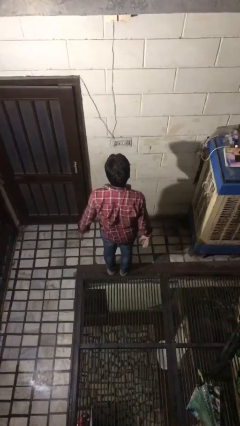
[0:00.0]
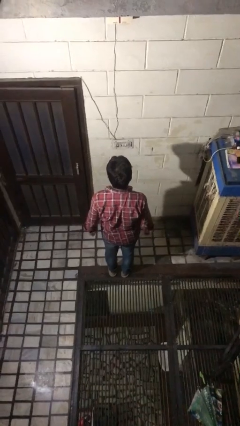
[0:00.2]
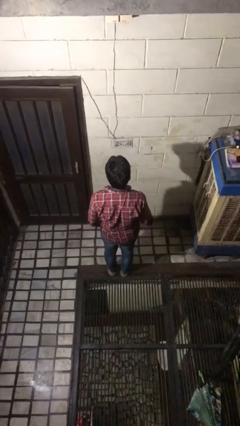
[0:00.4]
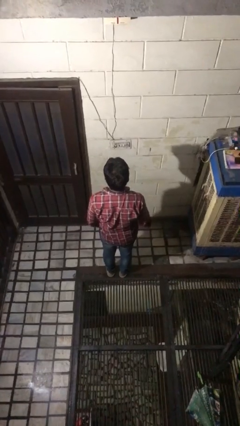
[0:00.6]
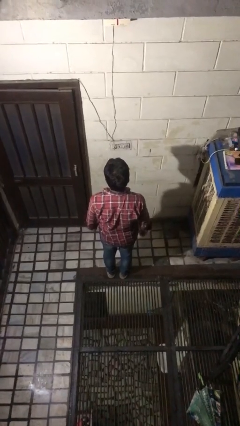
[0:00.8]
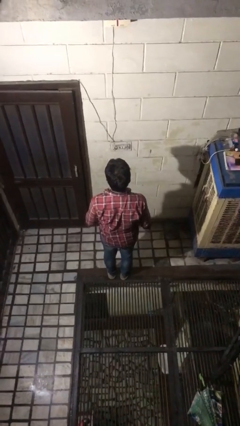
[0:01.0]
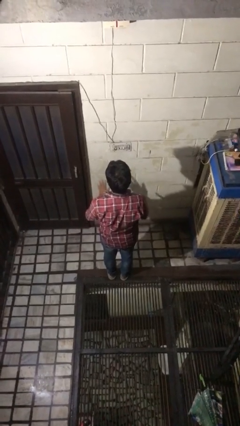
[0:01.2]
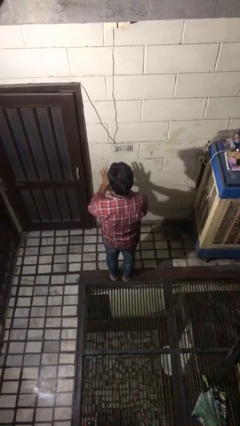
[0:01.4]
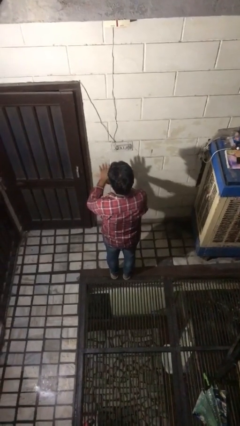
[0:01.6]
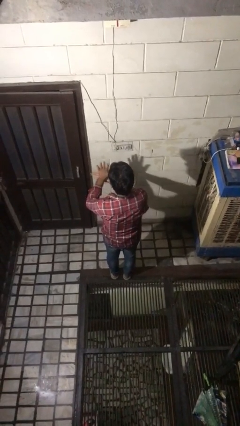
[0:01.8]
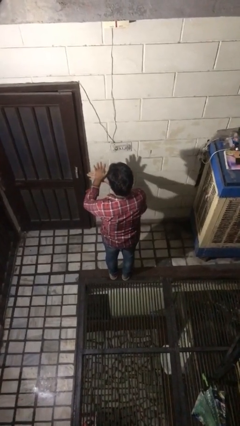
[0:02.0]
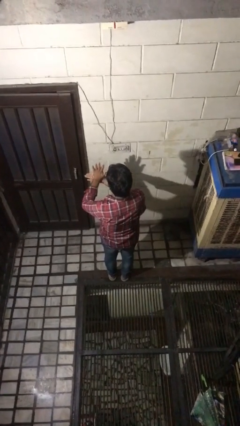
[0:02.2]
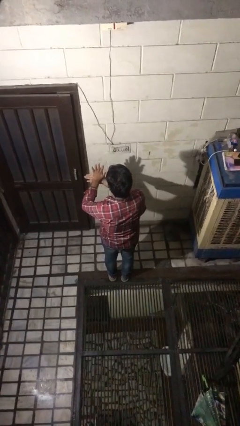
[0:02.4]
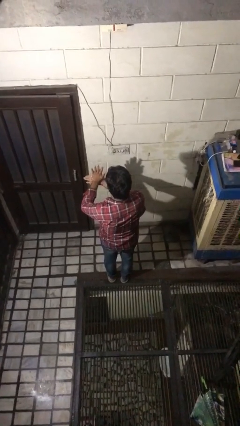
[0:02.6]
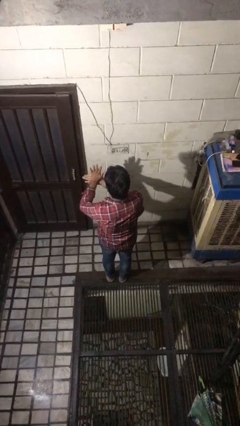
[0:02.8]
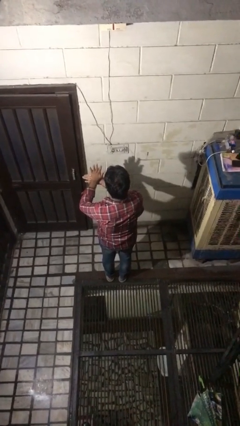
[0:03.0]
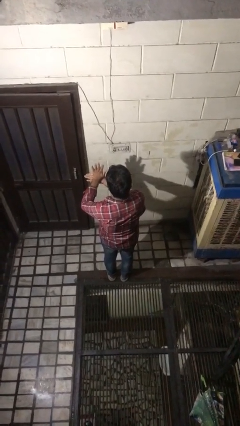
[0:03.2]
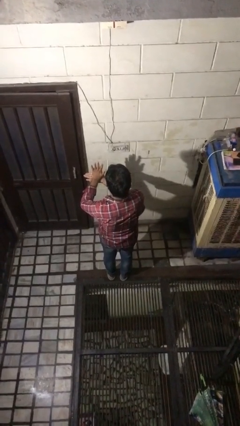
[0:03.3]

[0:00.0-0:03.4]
person gestures number five

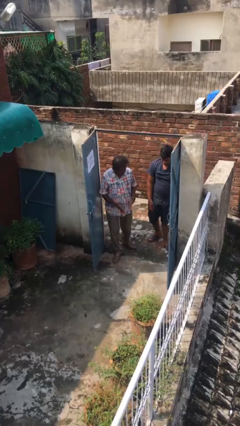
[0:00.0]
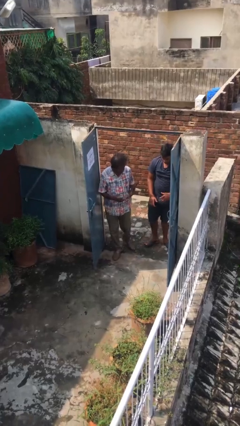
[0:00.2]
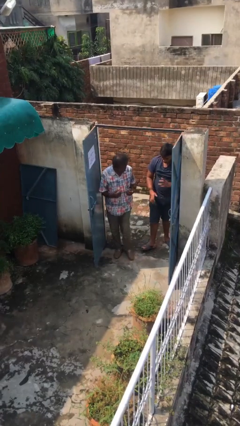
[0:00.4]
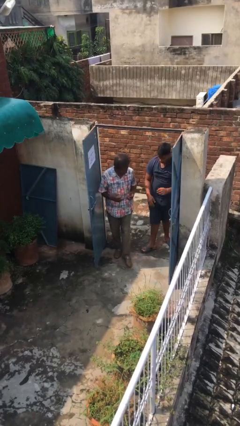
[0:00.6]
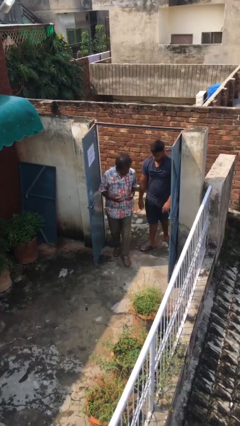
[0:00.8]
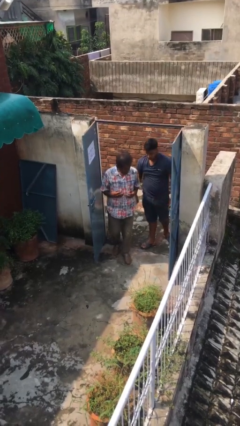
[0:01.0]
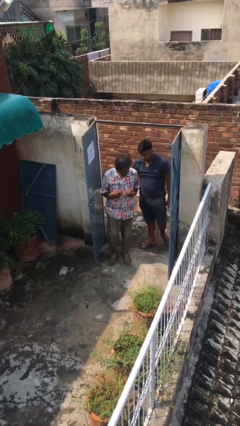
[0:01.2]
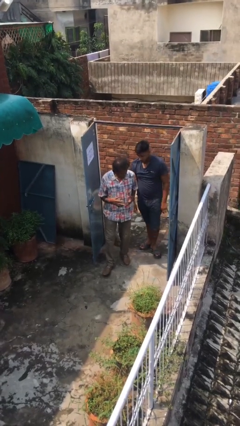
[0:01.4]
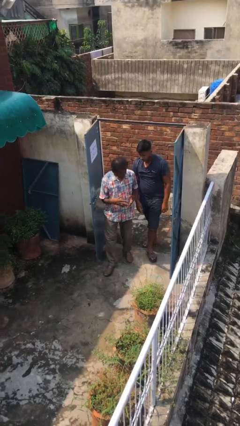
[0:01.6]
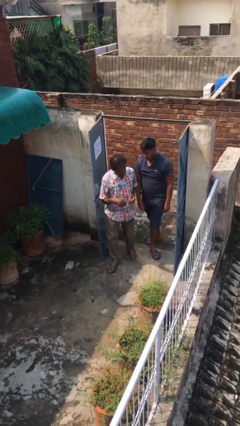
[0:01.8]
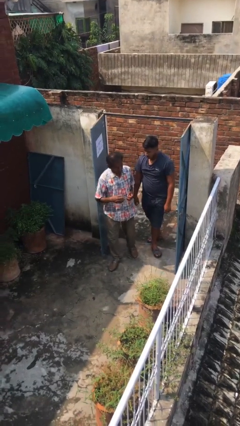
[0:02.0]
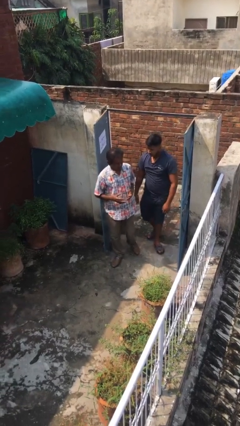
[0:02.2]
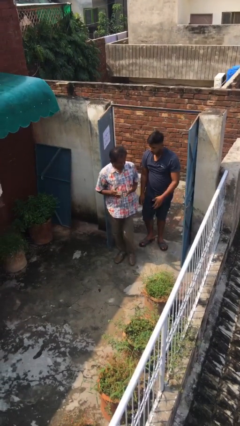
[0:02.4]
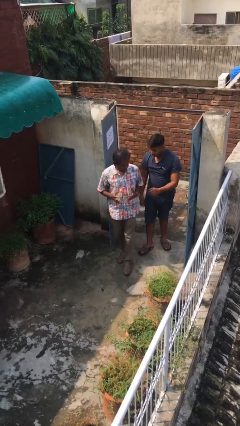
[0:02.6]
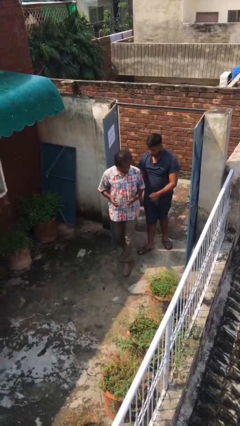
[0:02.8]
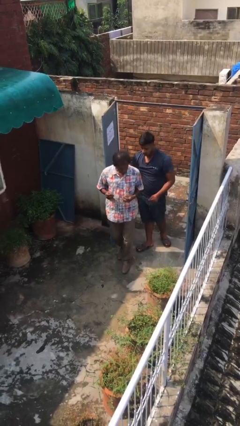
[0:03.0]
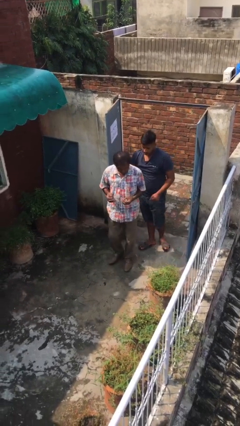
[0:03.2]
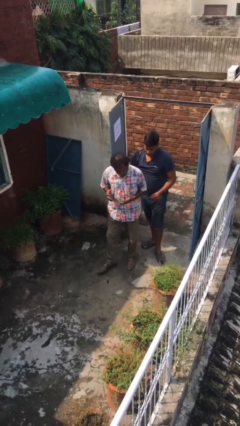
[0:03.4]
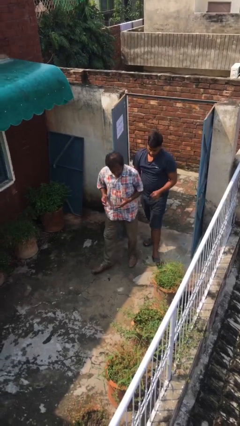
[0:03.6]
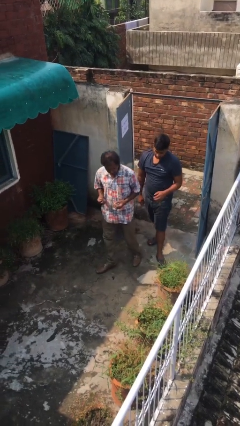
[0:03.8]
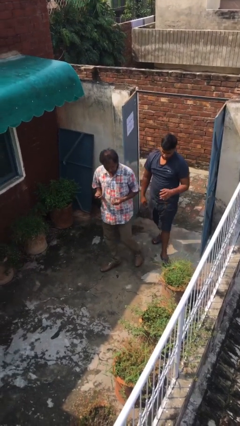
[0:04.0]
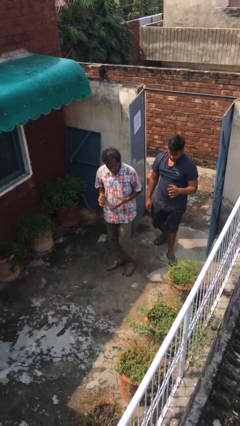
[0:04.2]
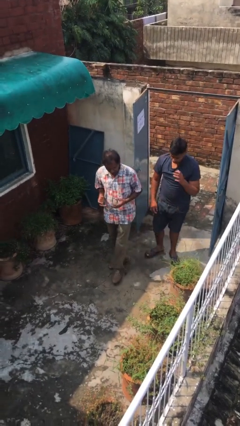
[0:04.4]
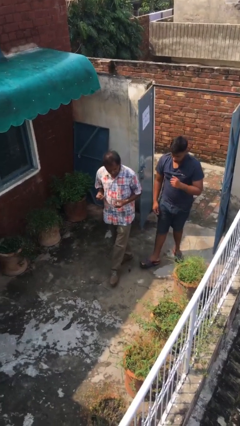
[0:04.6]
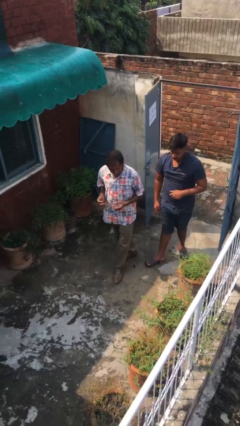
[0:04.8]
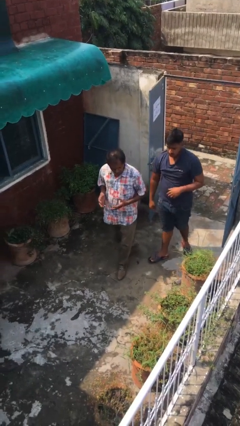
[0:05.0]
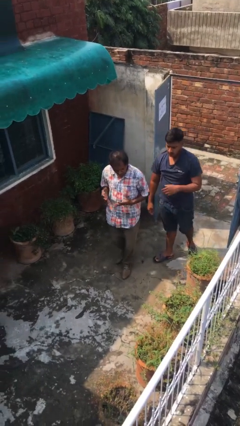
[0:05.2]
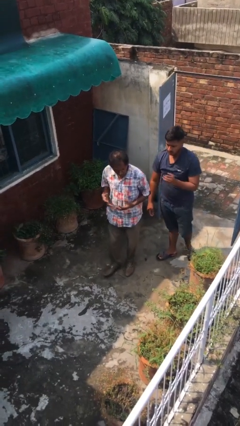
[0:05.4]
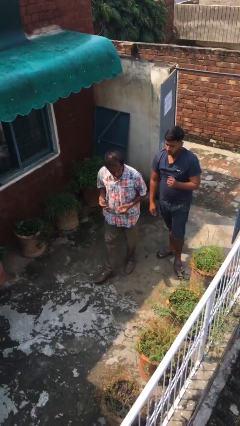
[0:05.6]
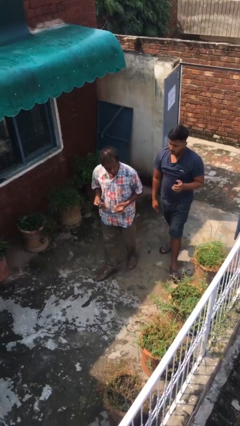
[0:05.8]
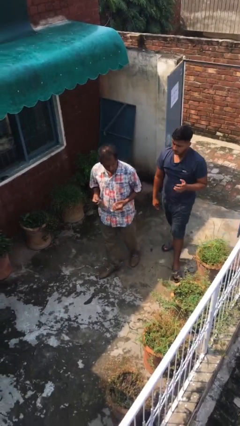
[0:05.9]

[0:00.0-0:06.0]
person talks to person

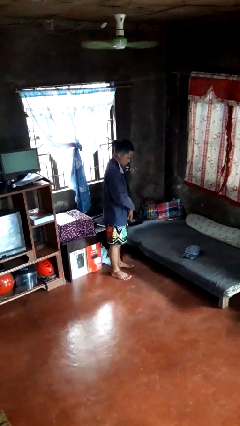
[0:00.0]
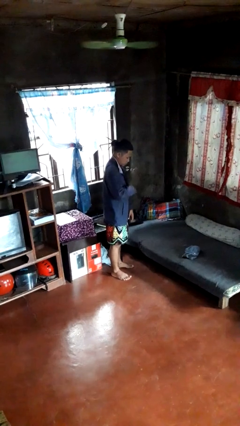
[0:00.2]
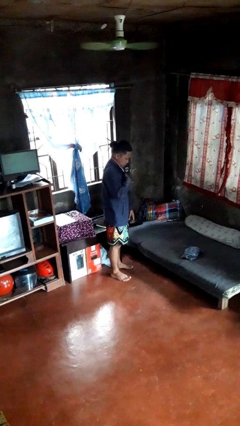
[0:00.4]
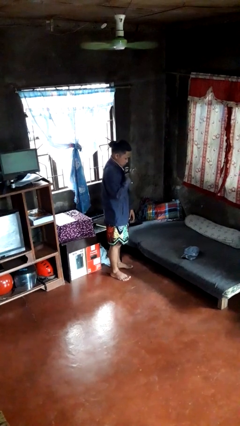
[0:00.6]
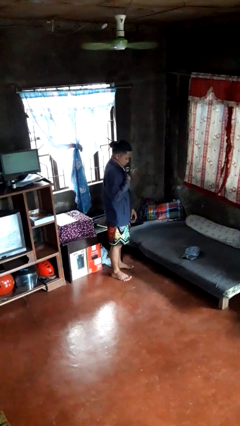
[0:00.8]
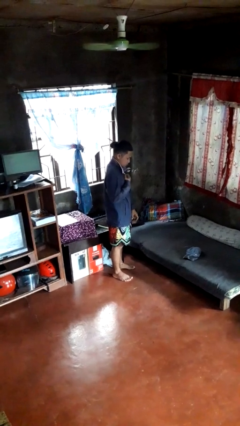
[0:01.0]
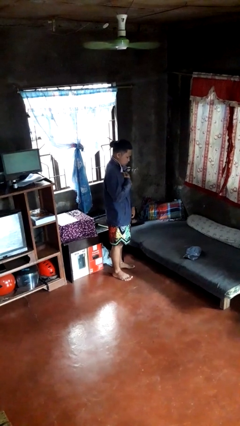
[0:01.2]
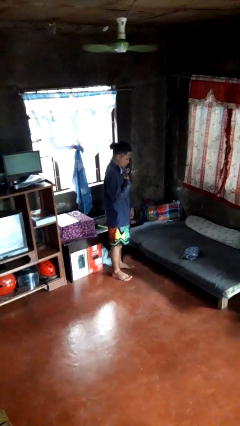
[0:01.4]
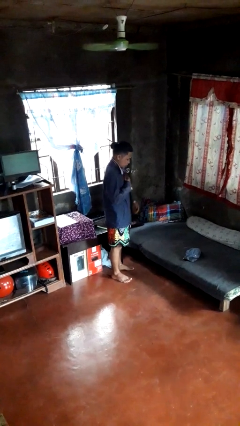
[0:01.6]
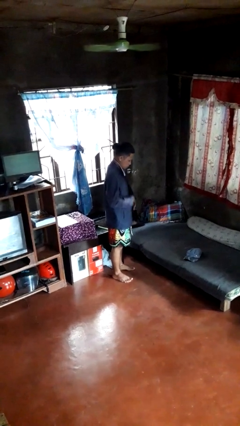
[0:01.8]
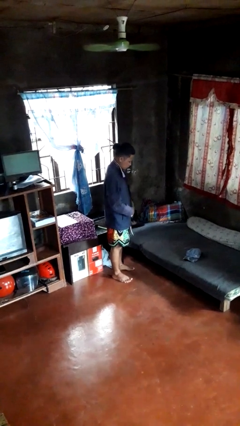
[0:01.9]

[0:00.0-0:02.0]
person zips up jacket

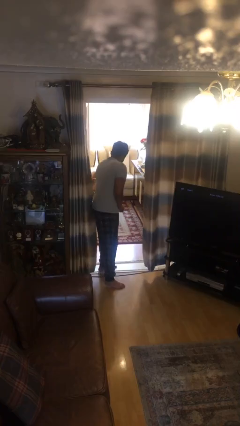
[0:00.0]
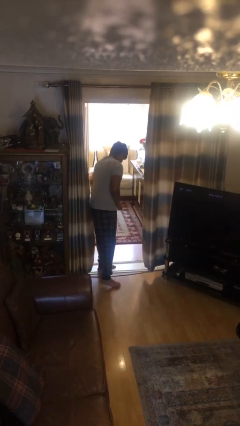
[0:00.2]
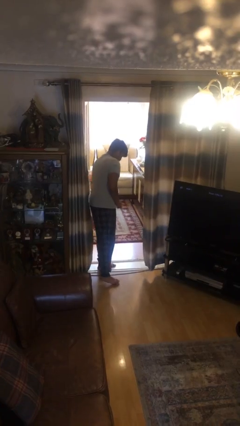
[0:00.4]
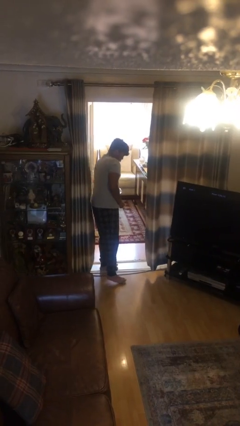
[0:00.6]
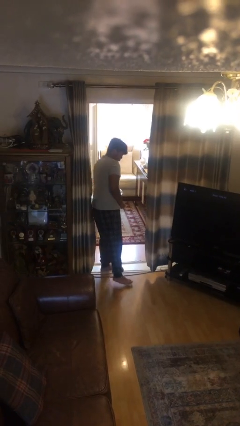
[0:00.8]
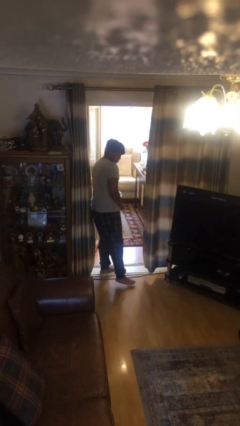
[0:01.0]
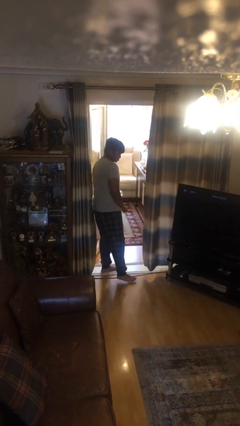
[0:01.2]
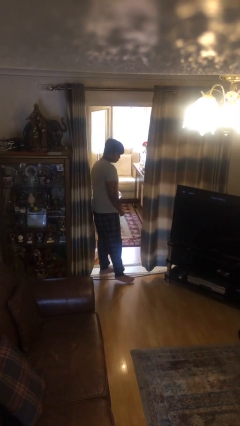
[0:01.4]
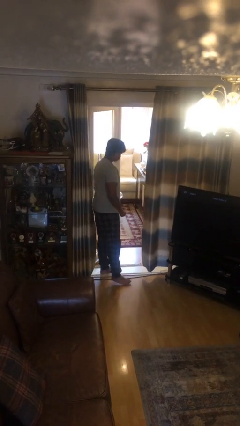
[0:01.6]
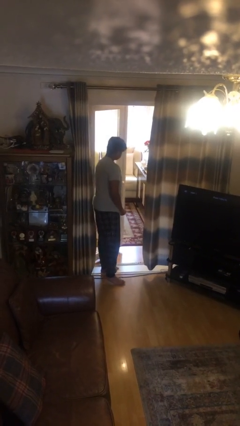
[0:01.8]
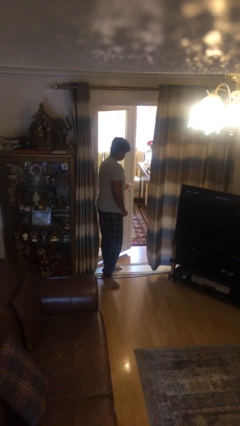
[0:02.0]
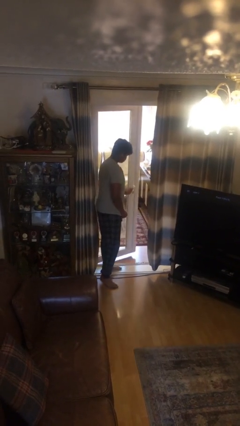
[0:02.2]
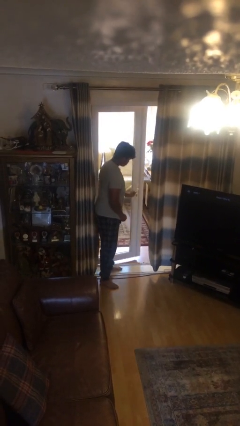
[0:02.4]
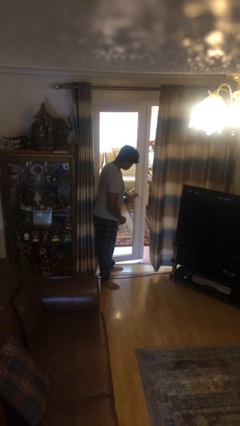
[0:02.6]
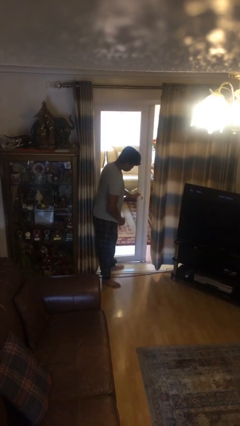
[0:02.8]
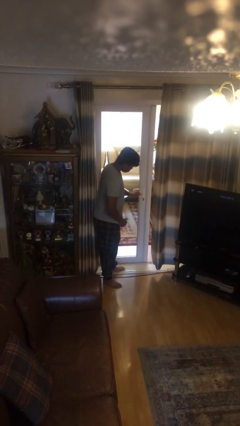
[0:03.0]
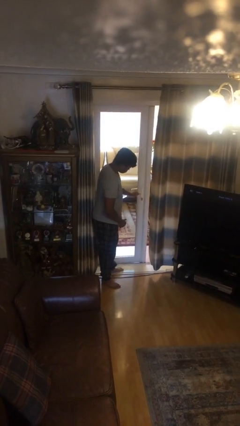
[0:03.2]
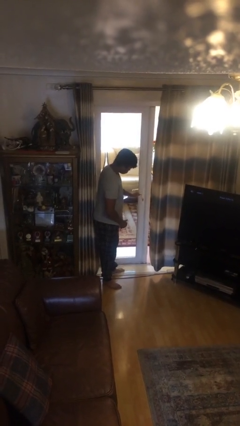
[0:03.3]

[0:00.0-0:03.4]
person closes facility door

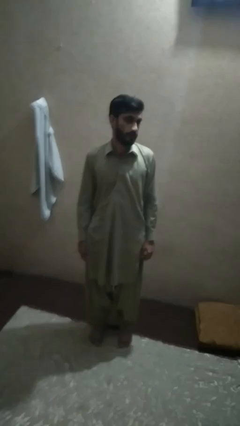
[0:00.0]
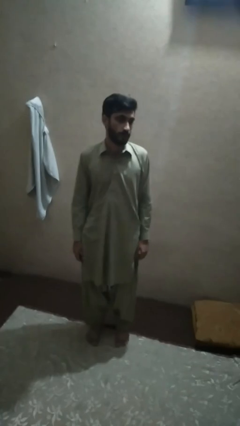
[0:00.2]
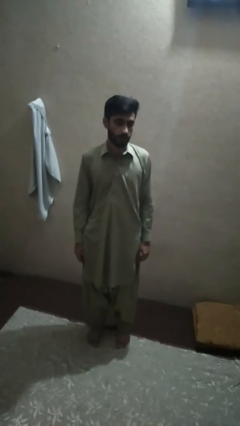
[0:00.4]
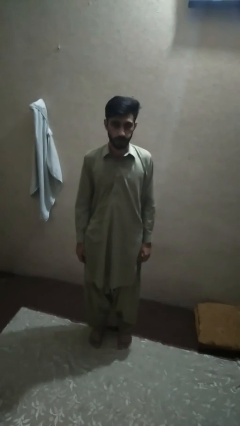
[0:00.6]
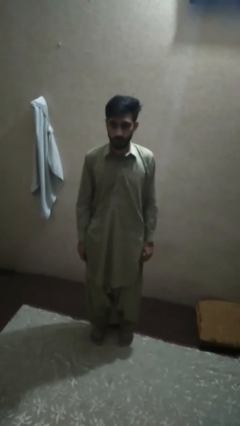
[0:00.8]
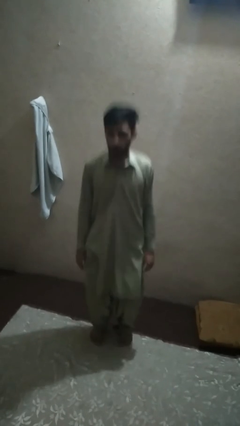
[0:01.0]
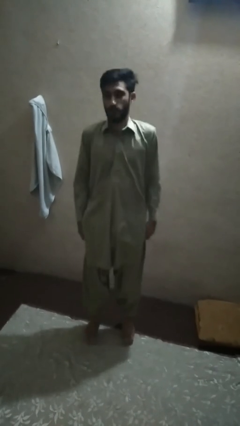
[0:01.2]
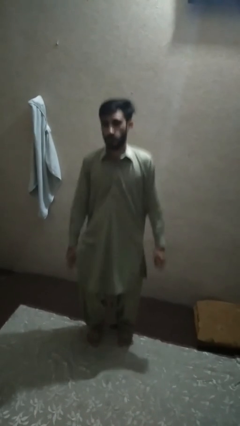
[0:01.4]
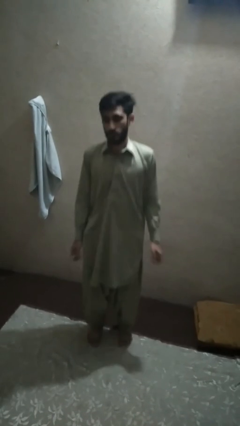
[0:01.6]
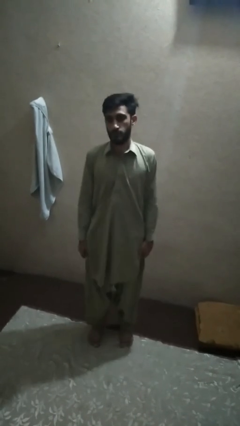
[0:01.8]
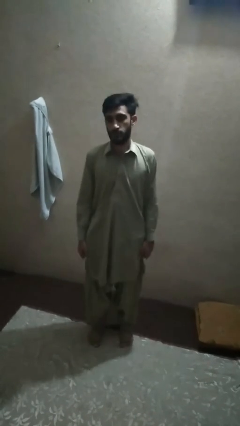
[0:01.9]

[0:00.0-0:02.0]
person jumps

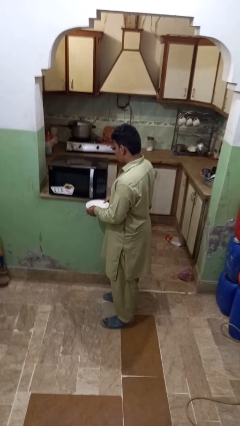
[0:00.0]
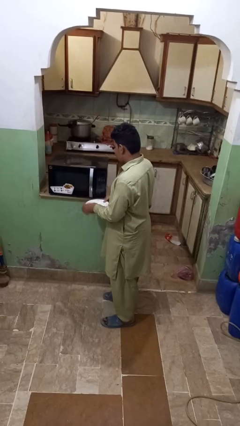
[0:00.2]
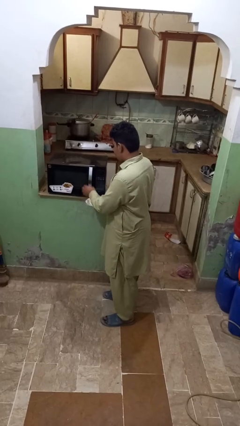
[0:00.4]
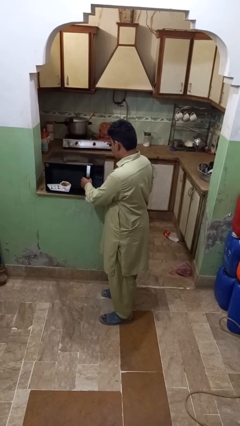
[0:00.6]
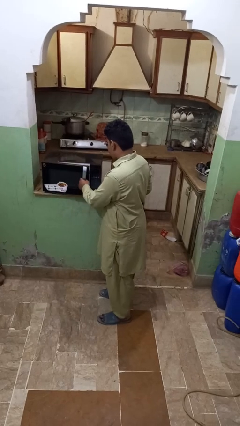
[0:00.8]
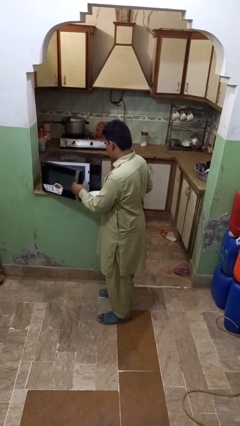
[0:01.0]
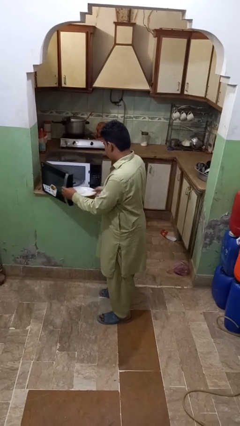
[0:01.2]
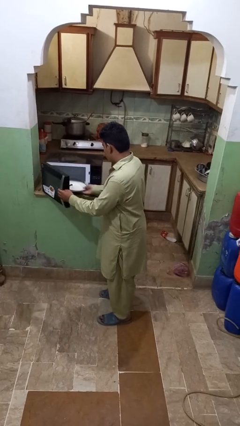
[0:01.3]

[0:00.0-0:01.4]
person puts object into microwave
